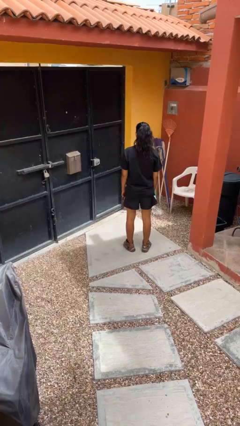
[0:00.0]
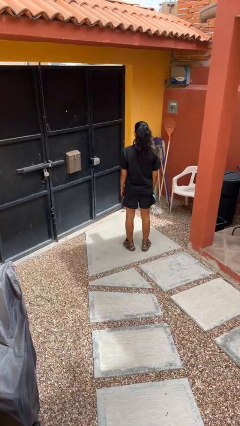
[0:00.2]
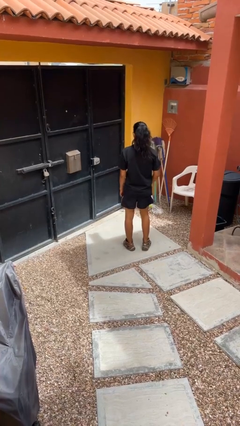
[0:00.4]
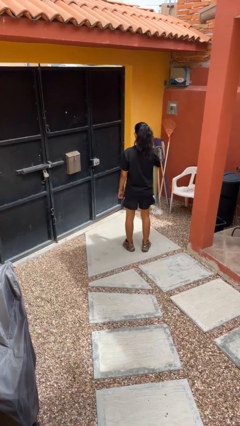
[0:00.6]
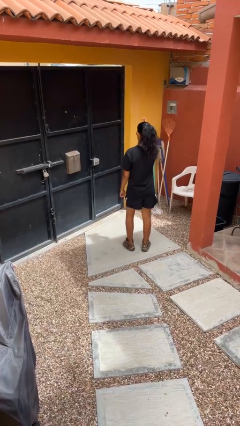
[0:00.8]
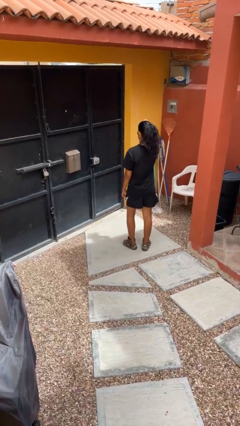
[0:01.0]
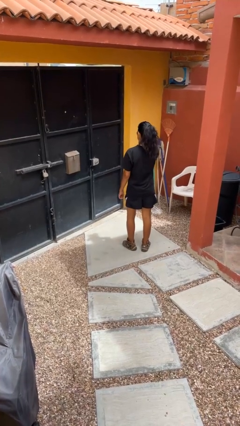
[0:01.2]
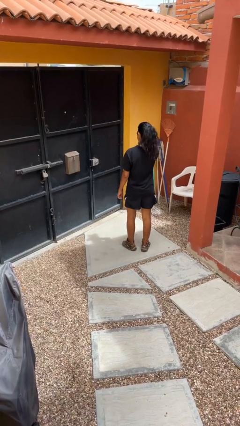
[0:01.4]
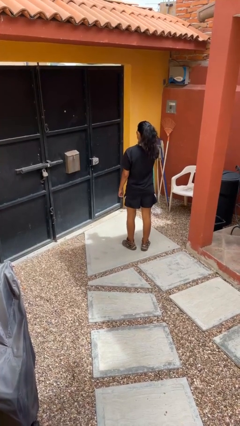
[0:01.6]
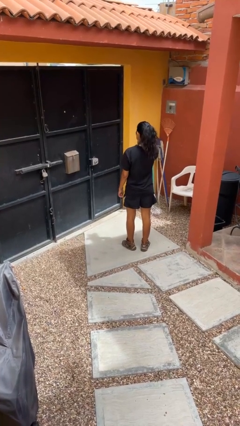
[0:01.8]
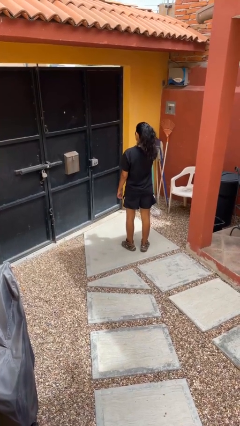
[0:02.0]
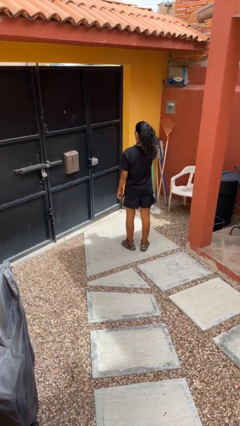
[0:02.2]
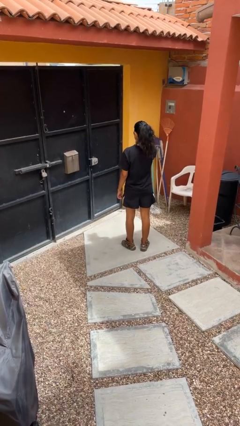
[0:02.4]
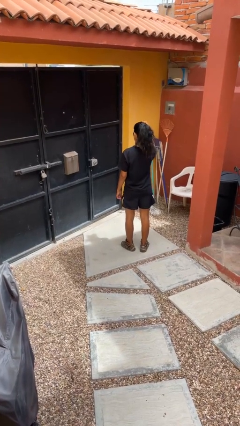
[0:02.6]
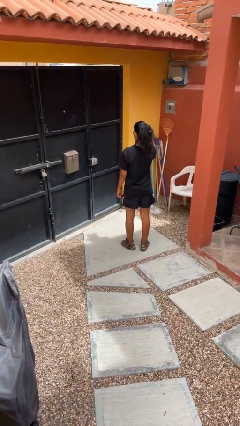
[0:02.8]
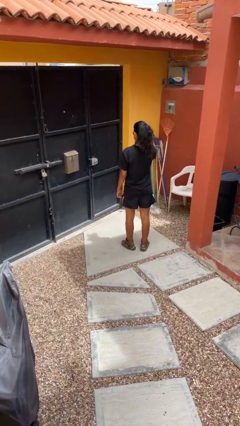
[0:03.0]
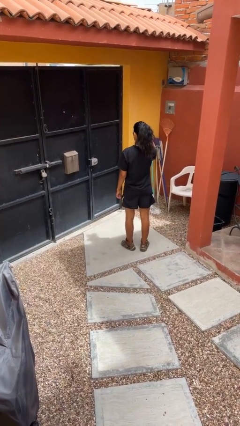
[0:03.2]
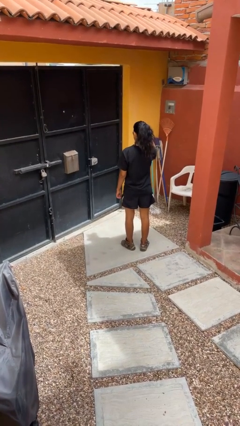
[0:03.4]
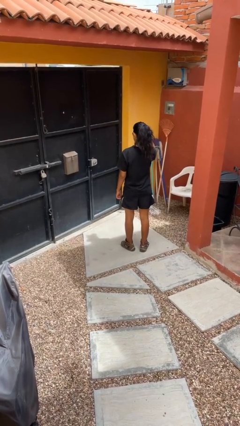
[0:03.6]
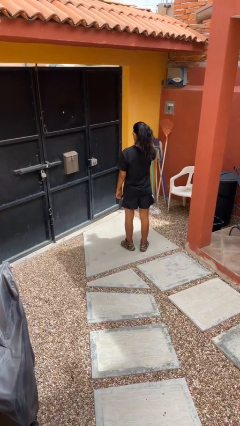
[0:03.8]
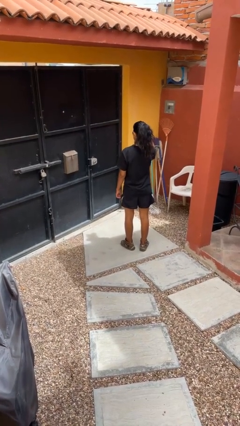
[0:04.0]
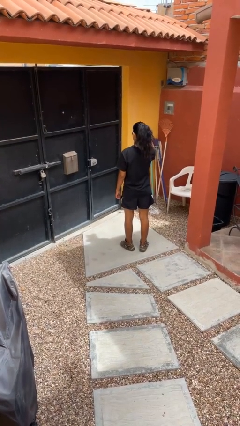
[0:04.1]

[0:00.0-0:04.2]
person gestures come here

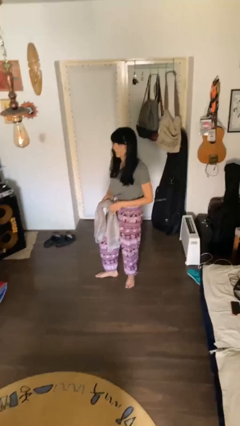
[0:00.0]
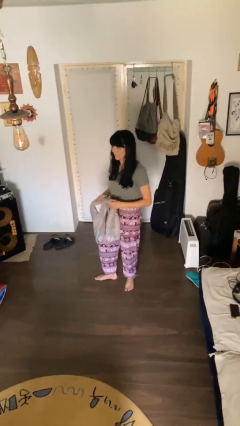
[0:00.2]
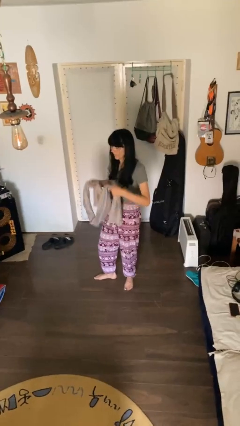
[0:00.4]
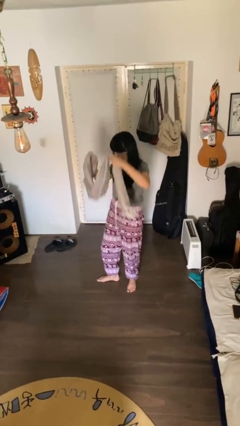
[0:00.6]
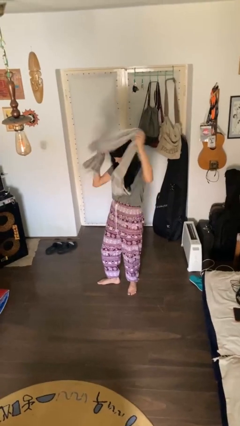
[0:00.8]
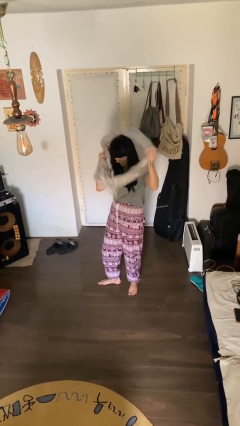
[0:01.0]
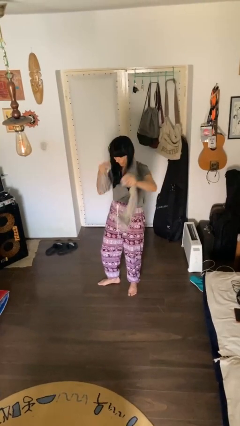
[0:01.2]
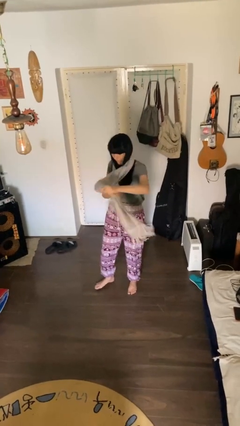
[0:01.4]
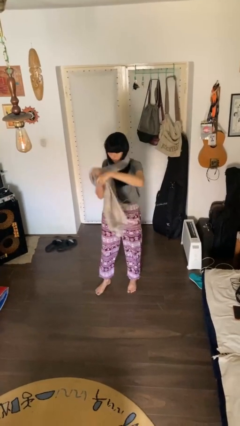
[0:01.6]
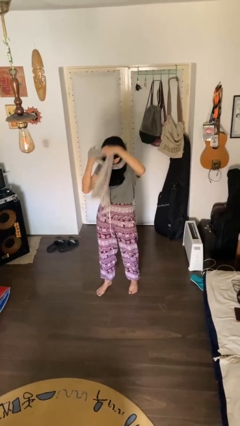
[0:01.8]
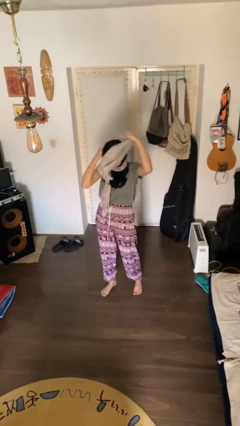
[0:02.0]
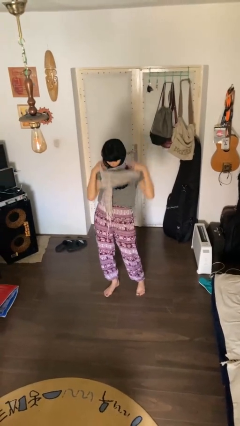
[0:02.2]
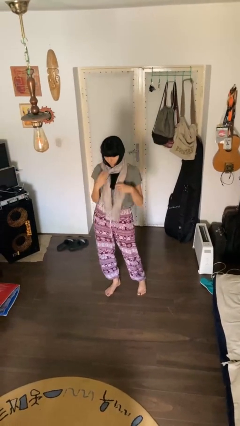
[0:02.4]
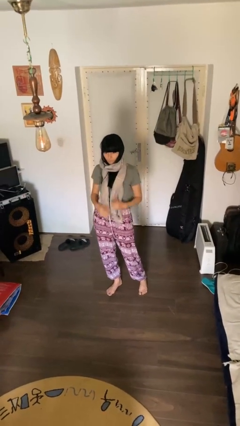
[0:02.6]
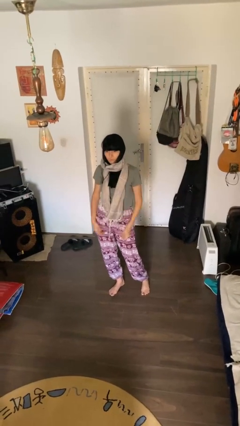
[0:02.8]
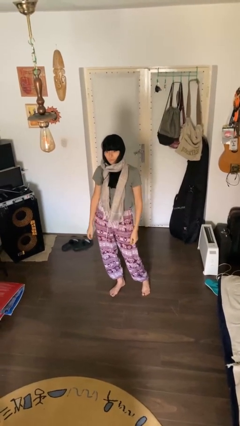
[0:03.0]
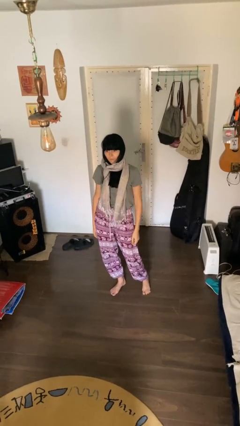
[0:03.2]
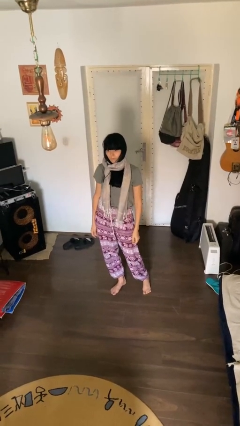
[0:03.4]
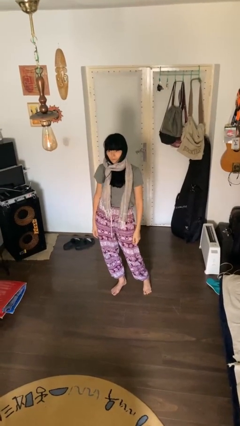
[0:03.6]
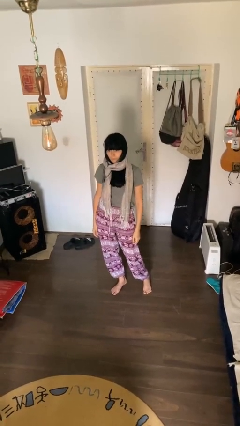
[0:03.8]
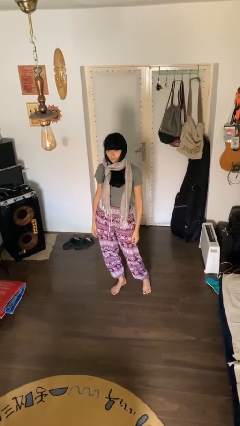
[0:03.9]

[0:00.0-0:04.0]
person puts on scarf

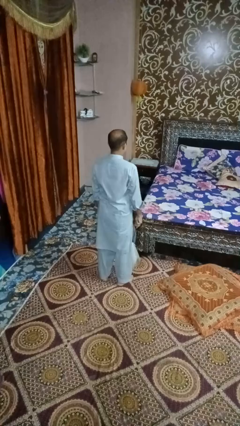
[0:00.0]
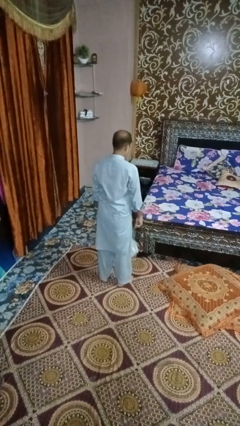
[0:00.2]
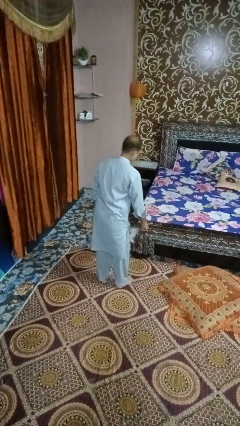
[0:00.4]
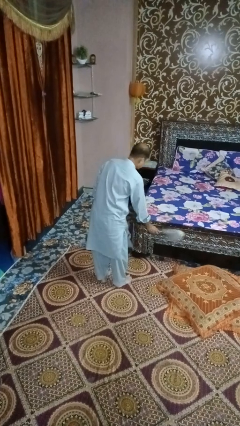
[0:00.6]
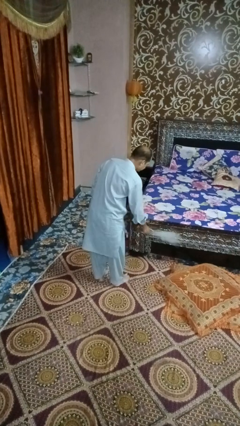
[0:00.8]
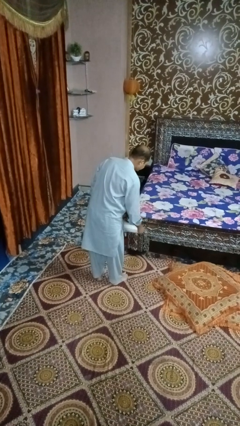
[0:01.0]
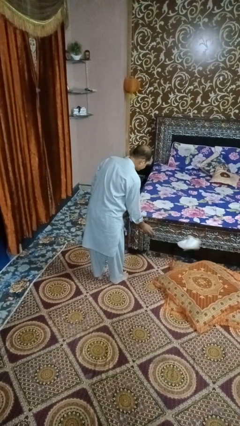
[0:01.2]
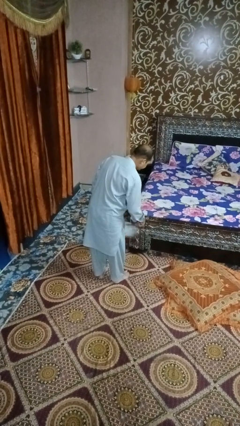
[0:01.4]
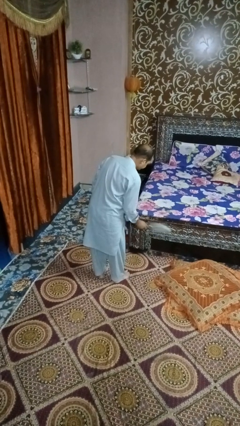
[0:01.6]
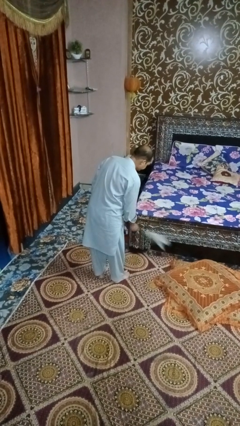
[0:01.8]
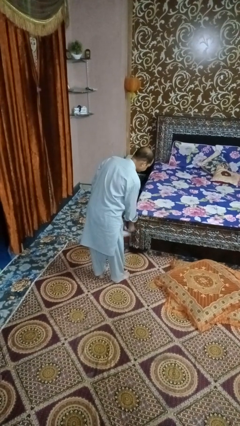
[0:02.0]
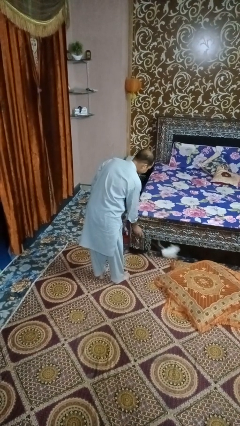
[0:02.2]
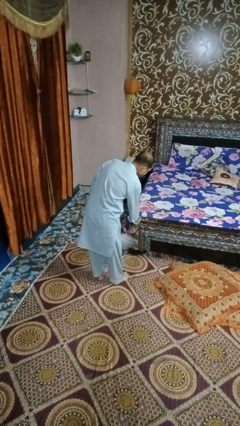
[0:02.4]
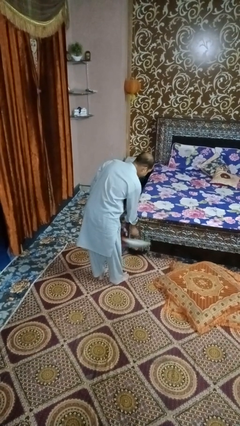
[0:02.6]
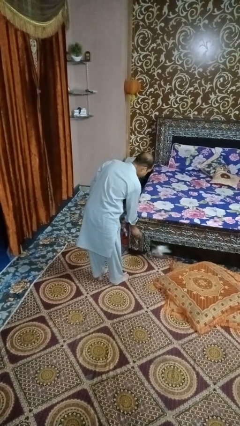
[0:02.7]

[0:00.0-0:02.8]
person dusts furniture

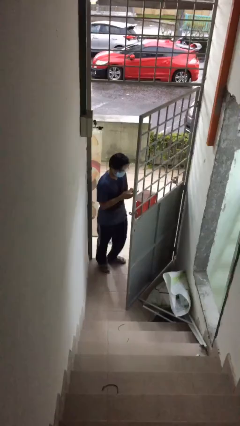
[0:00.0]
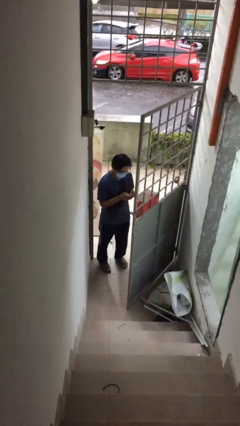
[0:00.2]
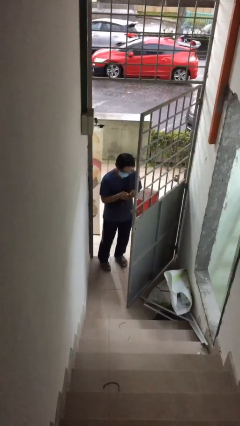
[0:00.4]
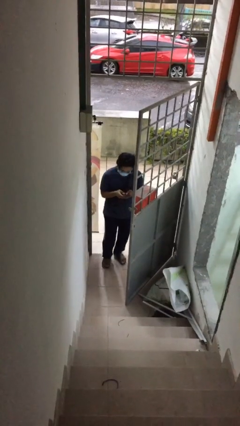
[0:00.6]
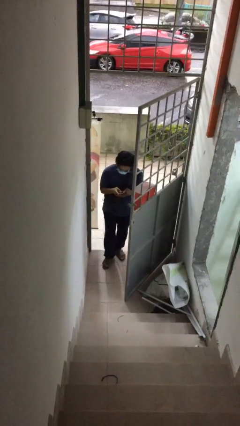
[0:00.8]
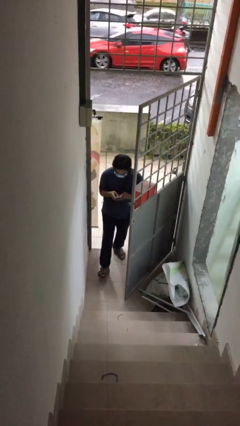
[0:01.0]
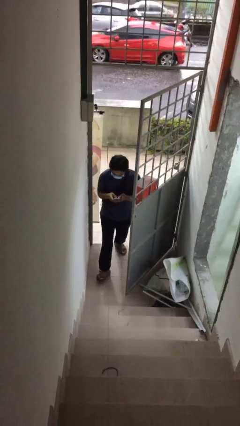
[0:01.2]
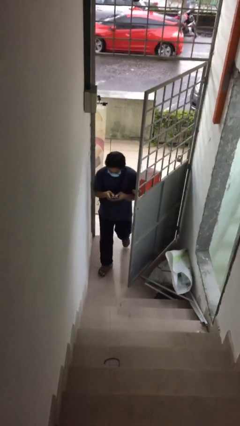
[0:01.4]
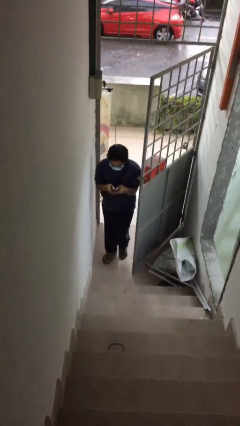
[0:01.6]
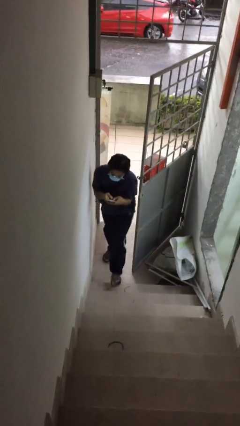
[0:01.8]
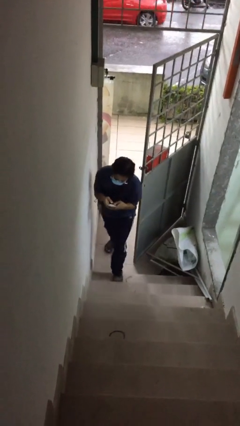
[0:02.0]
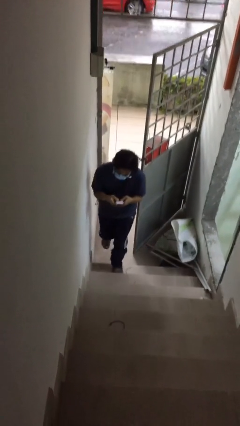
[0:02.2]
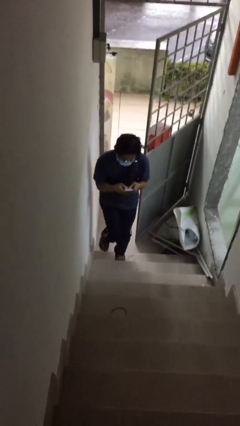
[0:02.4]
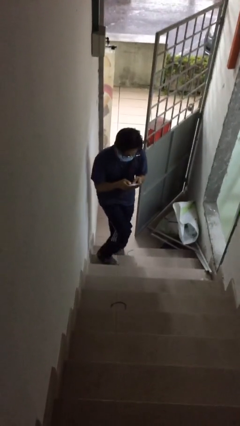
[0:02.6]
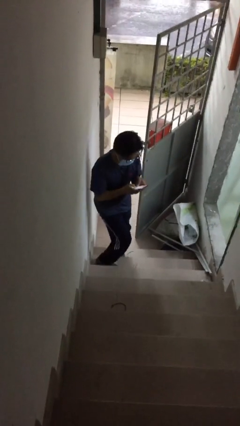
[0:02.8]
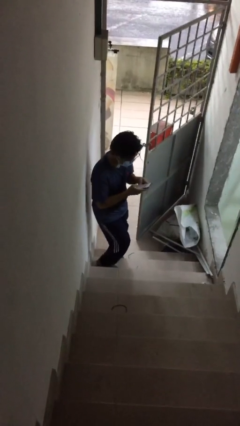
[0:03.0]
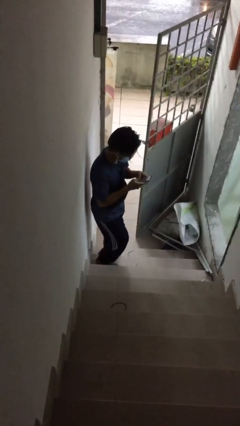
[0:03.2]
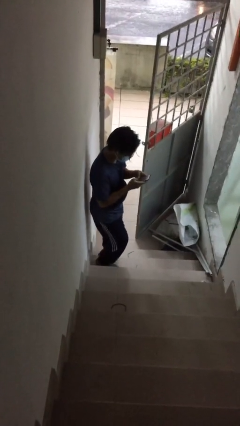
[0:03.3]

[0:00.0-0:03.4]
person enters scene through structure

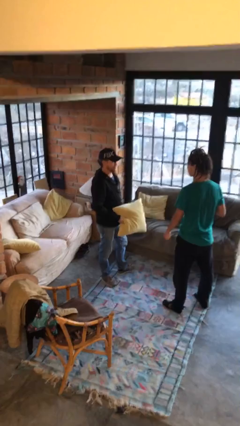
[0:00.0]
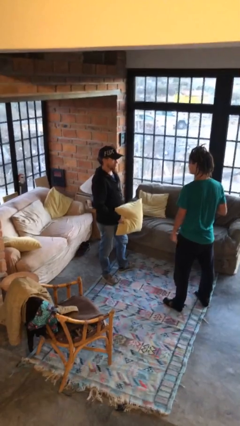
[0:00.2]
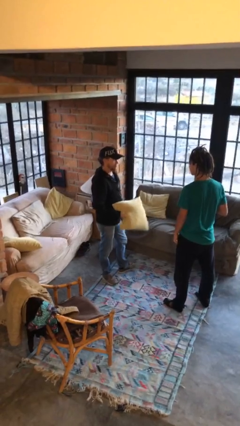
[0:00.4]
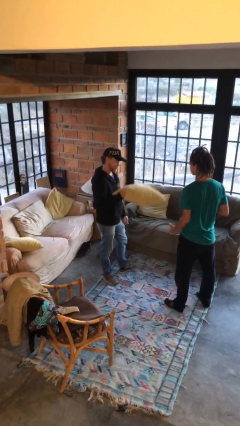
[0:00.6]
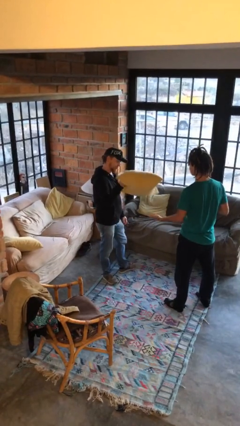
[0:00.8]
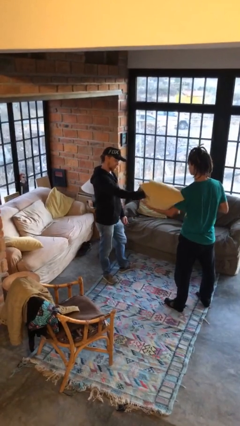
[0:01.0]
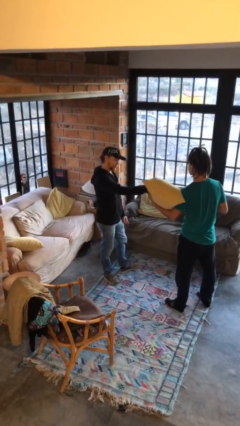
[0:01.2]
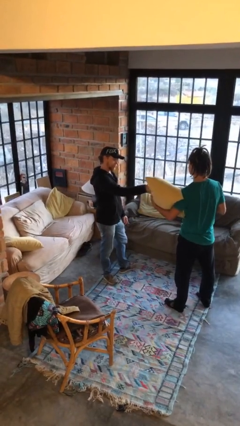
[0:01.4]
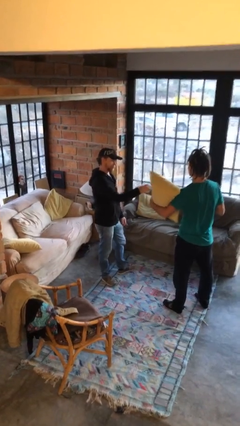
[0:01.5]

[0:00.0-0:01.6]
person transfers object to person

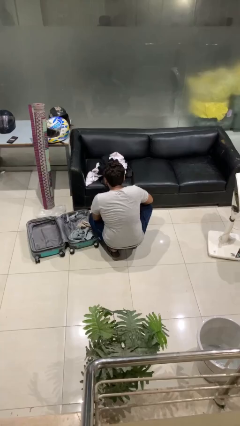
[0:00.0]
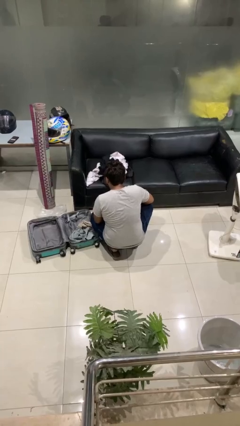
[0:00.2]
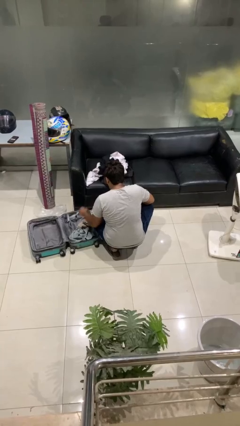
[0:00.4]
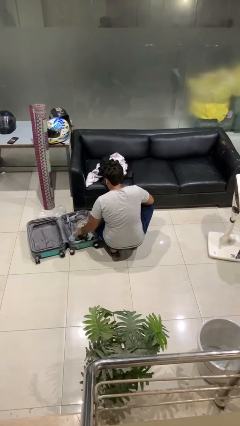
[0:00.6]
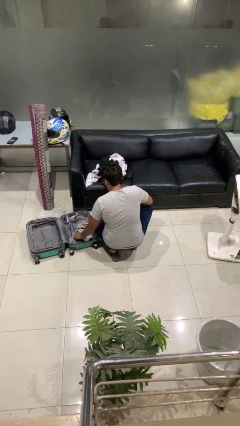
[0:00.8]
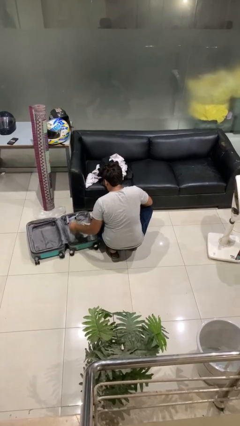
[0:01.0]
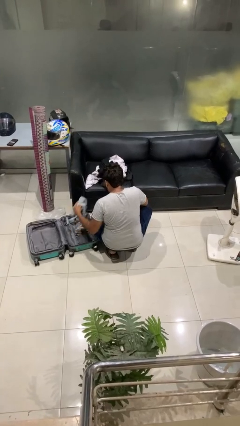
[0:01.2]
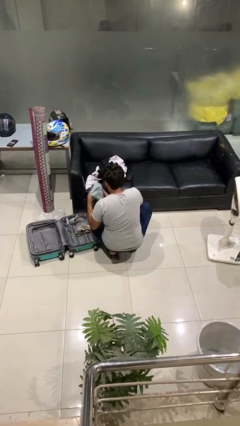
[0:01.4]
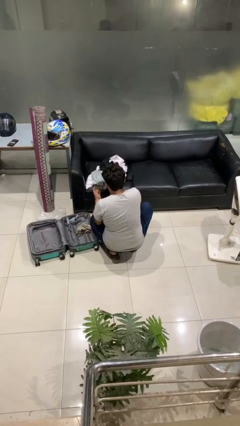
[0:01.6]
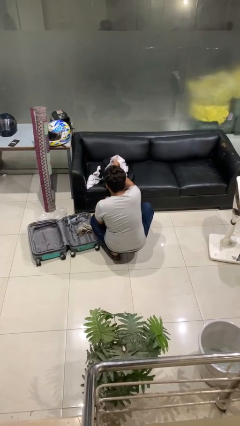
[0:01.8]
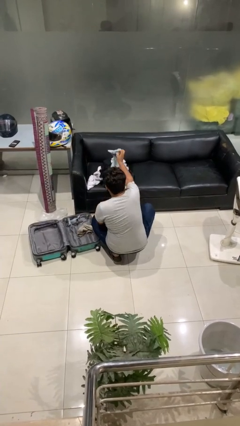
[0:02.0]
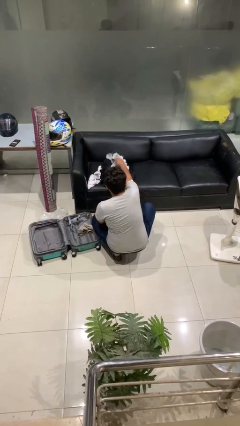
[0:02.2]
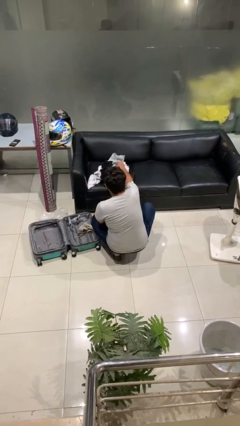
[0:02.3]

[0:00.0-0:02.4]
person unloads clothes from suitcase
